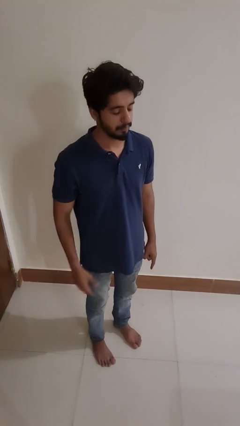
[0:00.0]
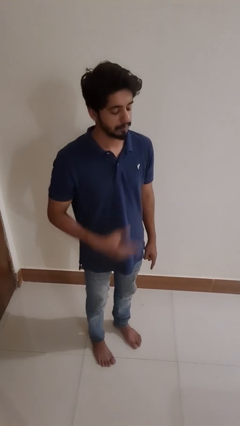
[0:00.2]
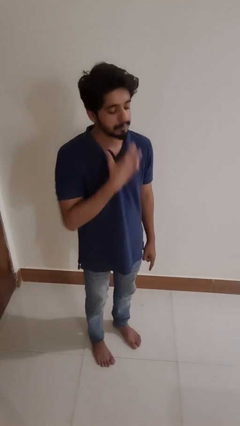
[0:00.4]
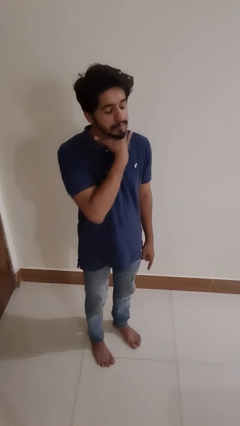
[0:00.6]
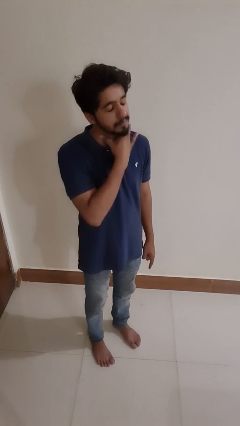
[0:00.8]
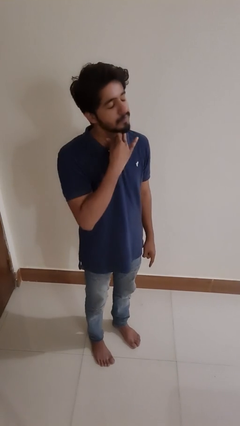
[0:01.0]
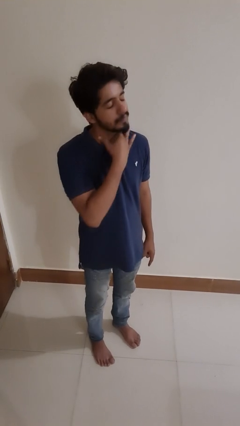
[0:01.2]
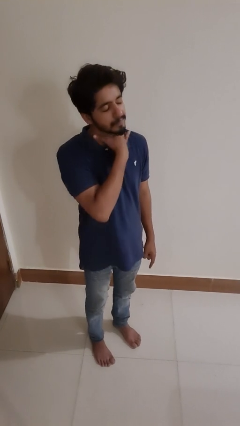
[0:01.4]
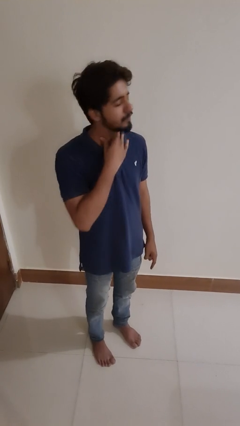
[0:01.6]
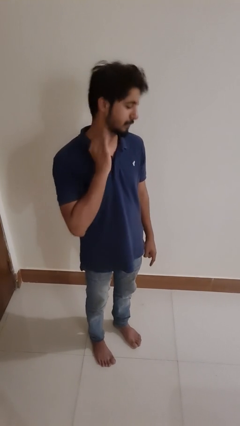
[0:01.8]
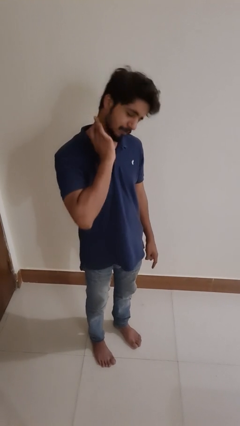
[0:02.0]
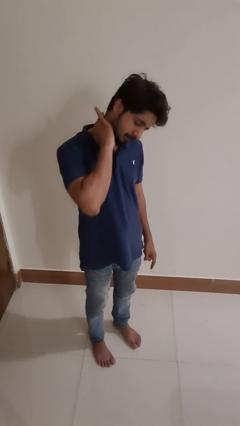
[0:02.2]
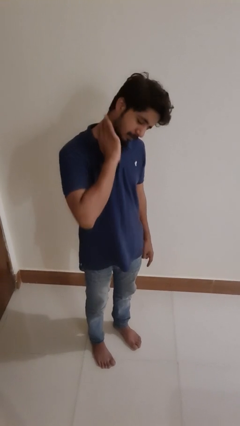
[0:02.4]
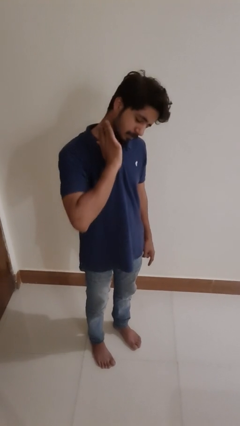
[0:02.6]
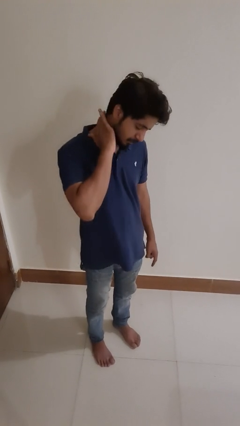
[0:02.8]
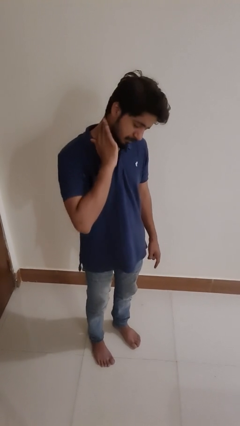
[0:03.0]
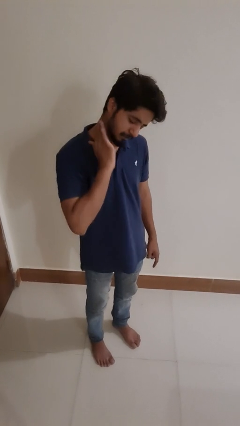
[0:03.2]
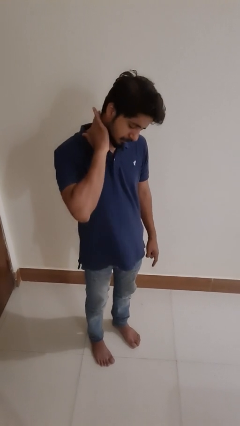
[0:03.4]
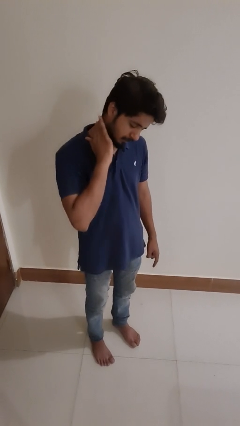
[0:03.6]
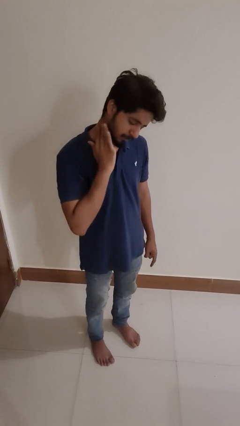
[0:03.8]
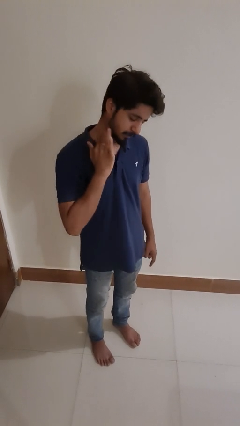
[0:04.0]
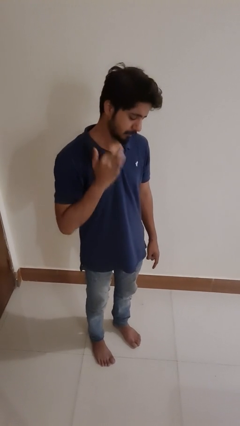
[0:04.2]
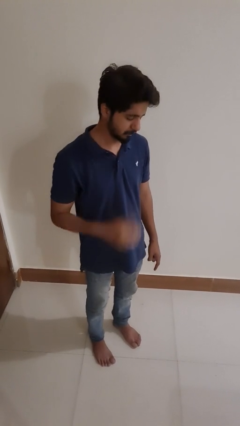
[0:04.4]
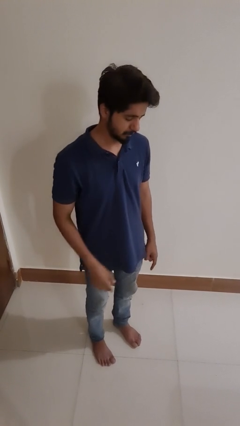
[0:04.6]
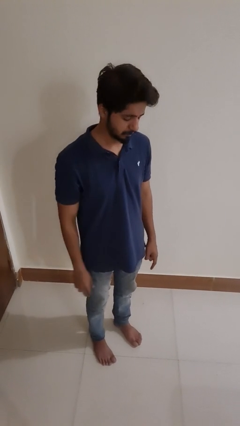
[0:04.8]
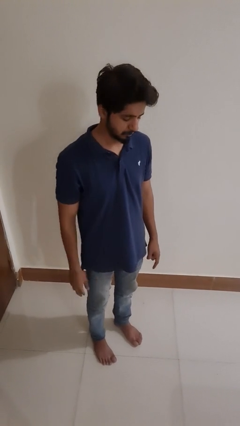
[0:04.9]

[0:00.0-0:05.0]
person rubs neck

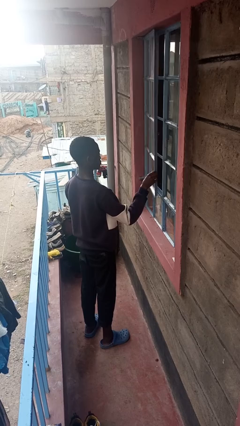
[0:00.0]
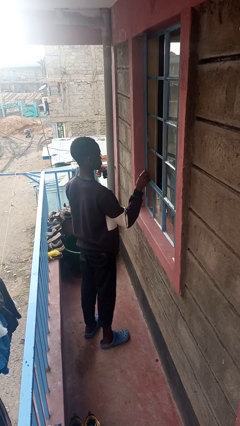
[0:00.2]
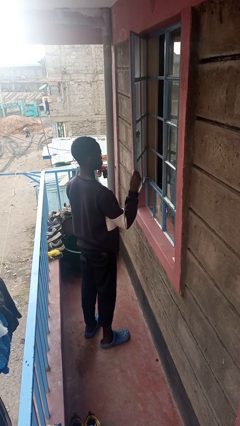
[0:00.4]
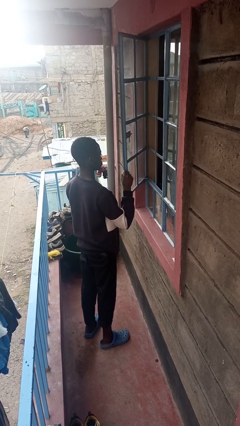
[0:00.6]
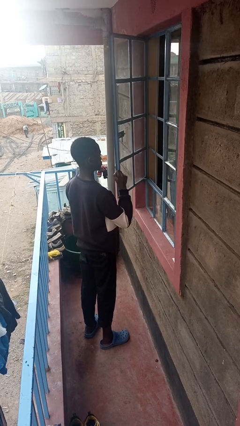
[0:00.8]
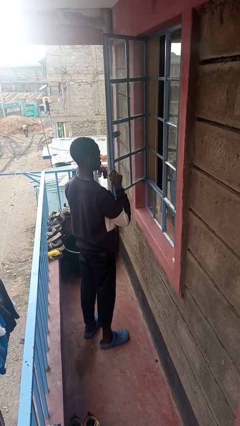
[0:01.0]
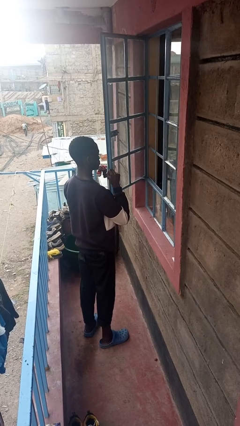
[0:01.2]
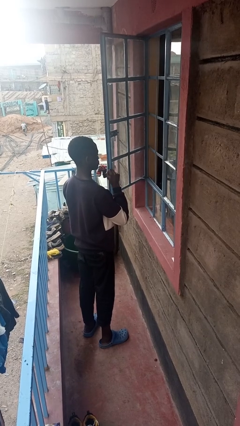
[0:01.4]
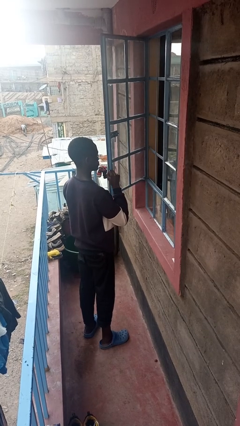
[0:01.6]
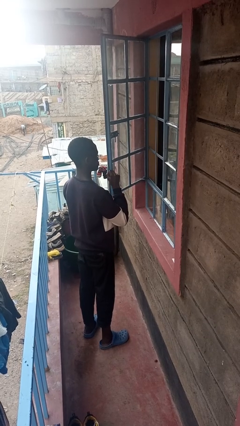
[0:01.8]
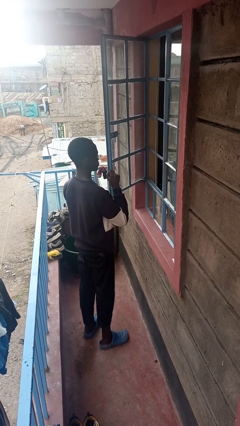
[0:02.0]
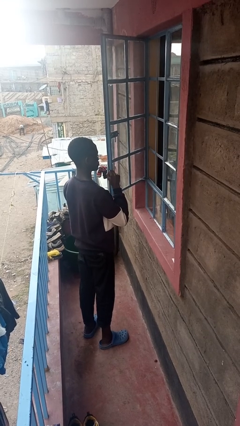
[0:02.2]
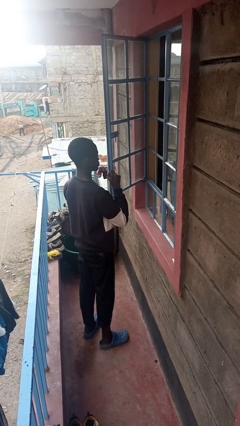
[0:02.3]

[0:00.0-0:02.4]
person opens home window

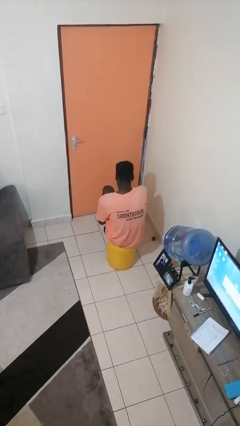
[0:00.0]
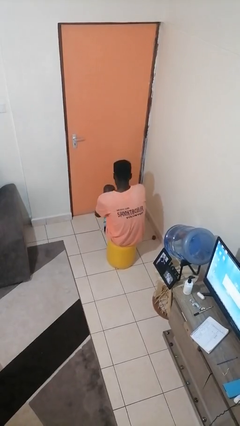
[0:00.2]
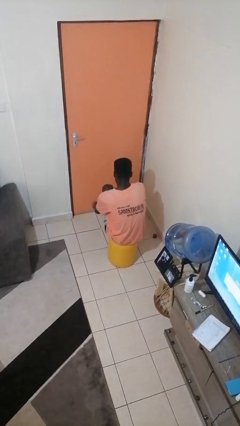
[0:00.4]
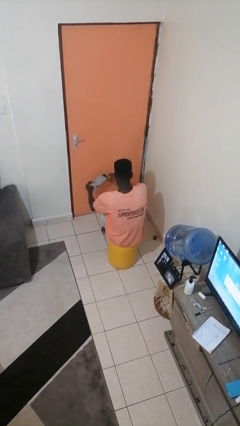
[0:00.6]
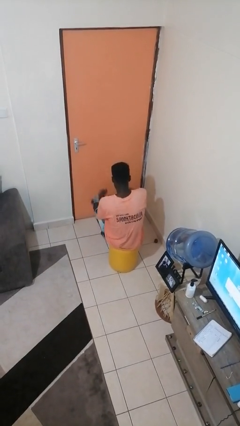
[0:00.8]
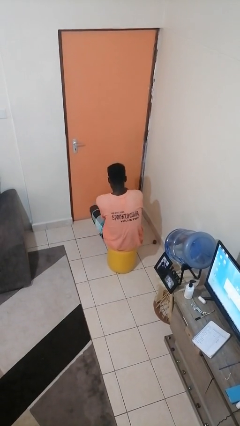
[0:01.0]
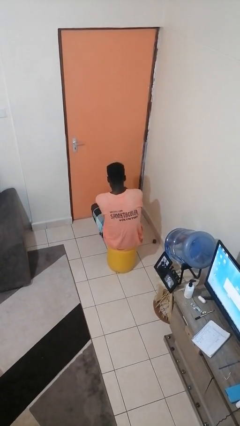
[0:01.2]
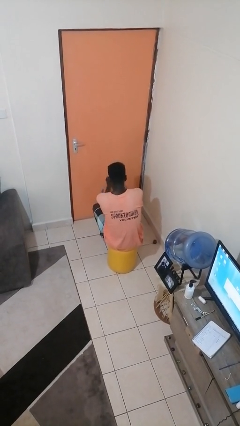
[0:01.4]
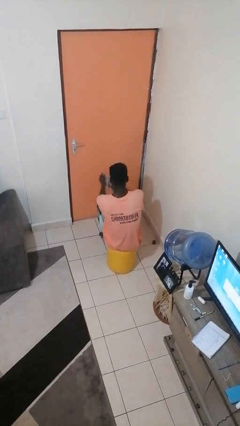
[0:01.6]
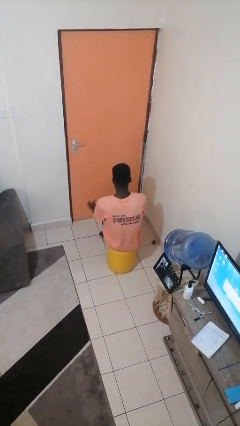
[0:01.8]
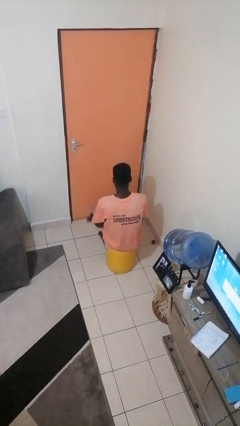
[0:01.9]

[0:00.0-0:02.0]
person takes off socks

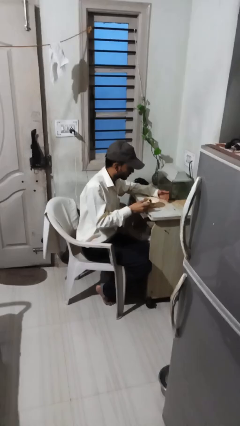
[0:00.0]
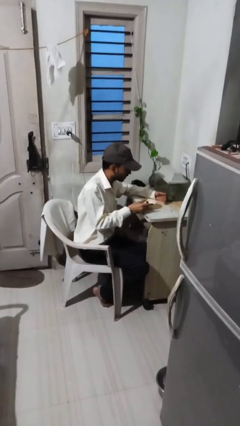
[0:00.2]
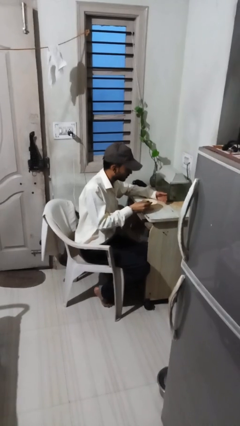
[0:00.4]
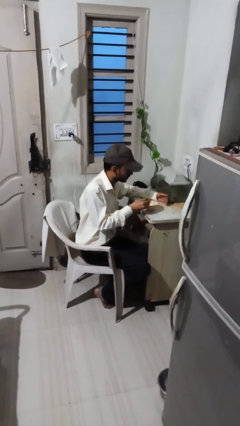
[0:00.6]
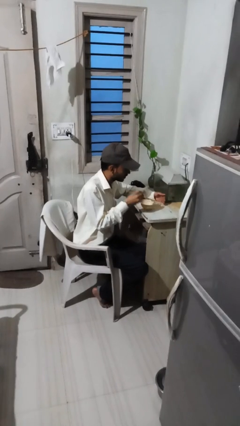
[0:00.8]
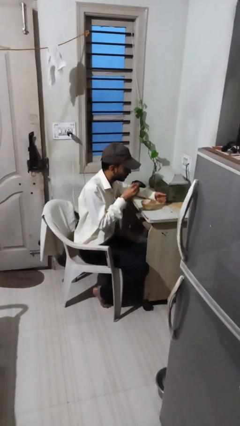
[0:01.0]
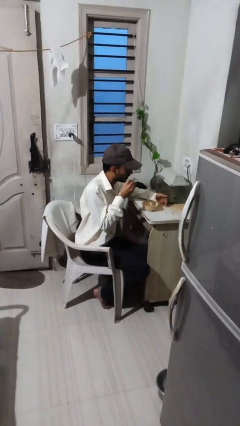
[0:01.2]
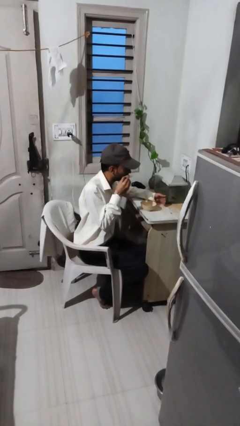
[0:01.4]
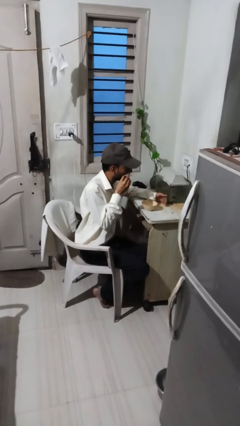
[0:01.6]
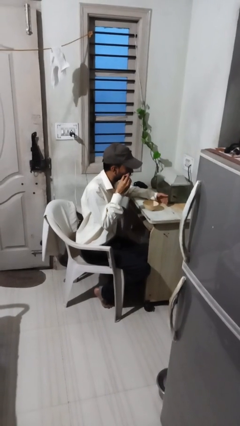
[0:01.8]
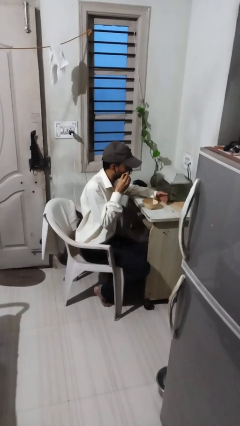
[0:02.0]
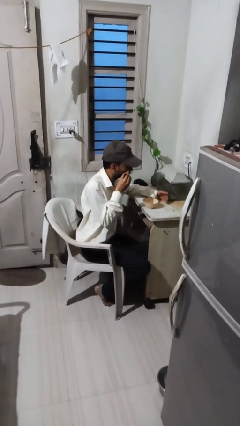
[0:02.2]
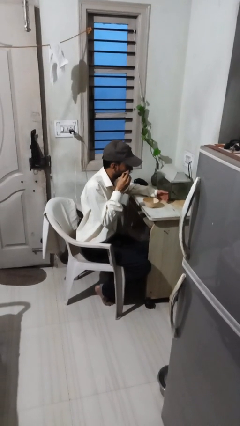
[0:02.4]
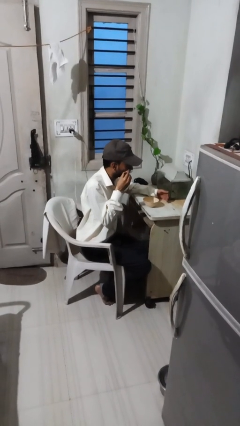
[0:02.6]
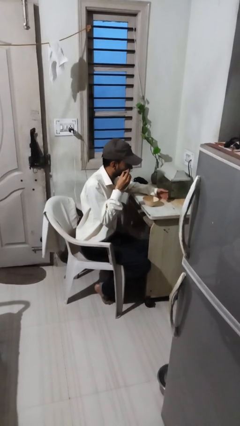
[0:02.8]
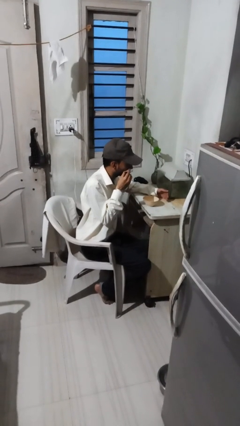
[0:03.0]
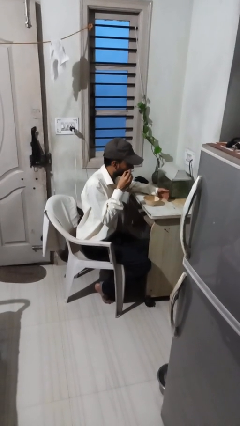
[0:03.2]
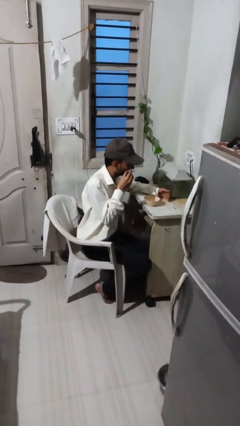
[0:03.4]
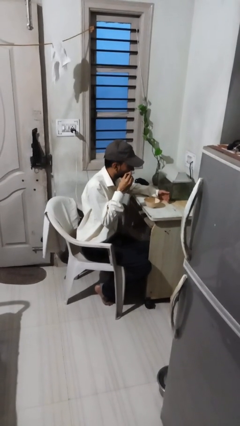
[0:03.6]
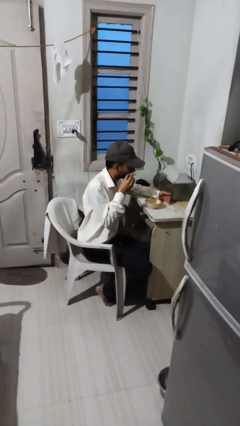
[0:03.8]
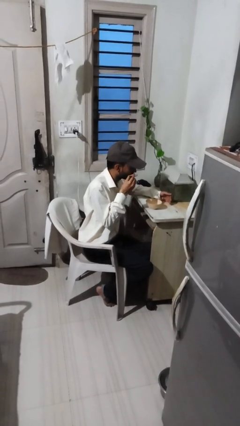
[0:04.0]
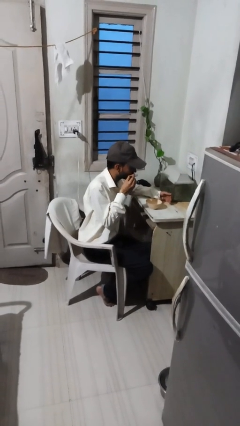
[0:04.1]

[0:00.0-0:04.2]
person eats with utensil

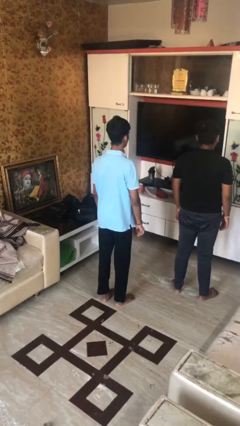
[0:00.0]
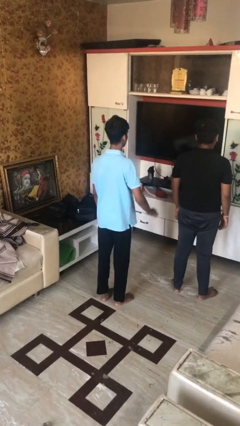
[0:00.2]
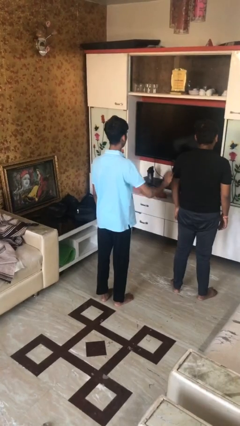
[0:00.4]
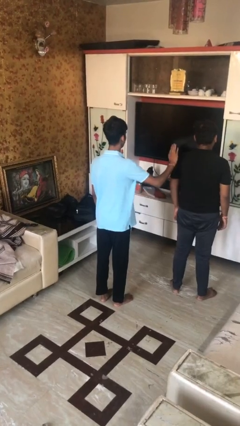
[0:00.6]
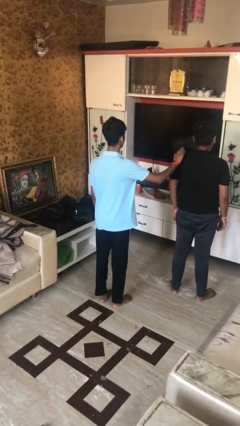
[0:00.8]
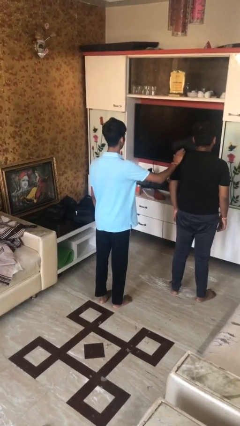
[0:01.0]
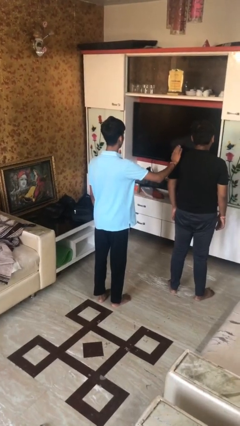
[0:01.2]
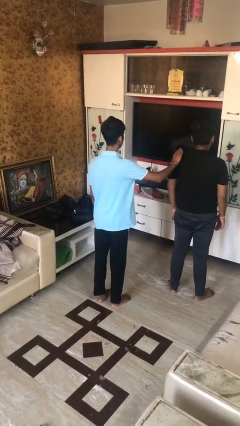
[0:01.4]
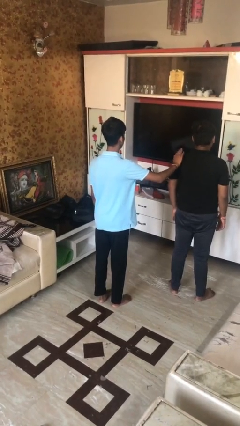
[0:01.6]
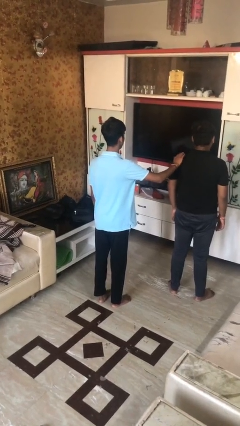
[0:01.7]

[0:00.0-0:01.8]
person pounds shoulders of person

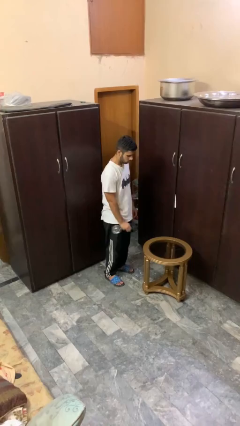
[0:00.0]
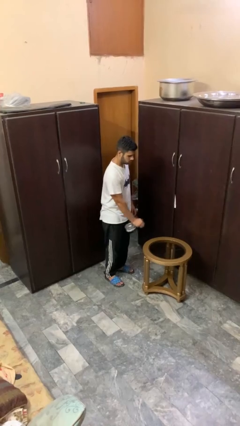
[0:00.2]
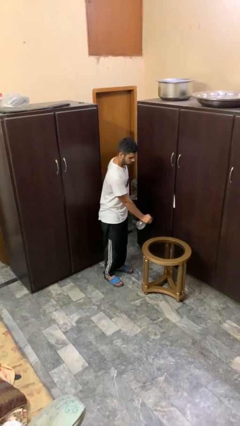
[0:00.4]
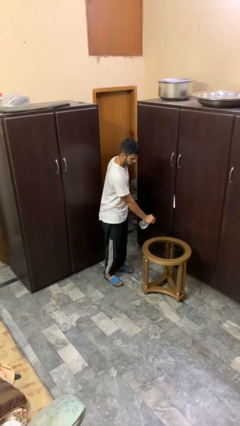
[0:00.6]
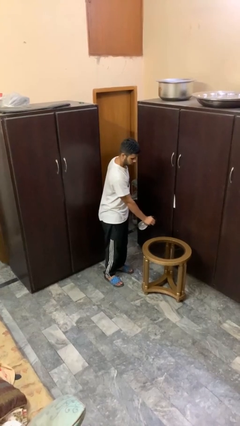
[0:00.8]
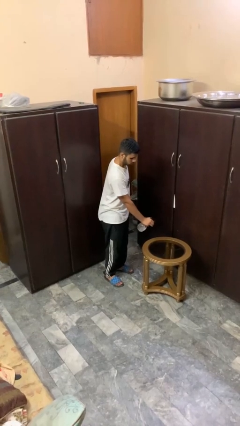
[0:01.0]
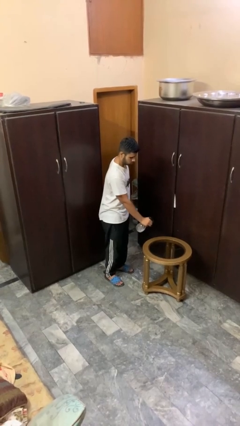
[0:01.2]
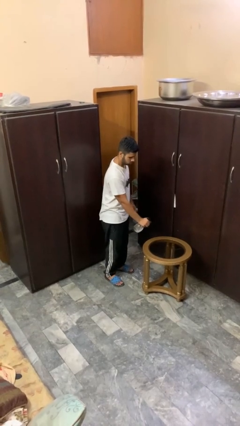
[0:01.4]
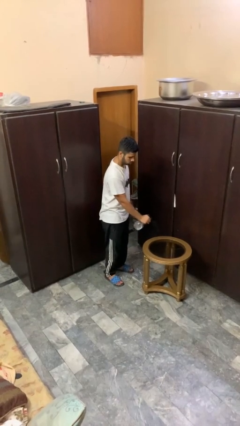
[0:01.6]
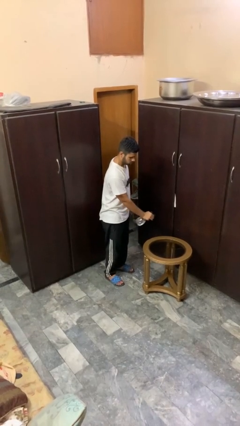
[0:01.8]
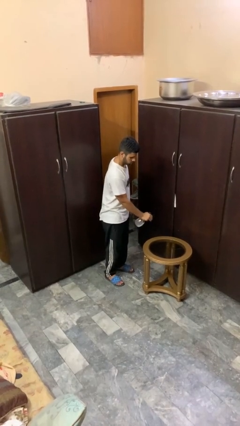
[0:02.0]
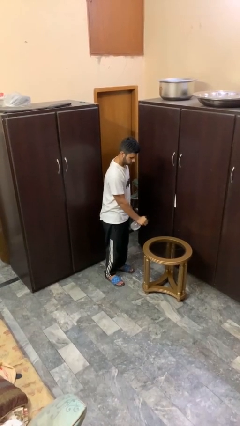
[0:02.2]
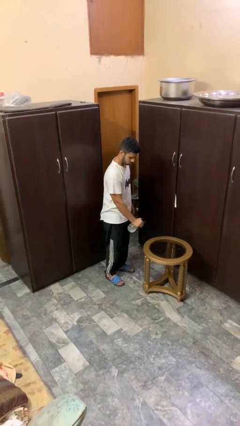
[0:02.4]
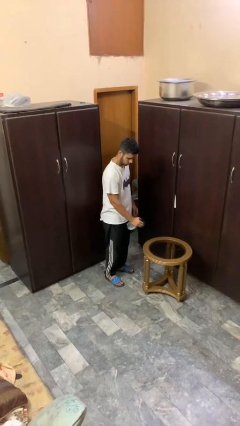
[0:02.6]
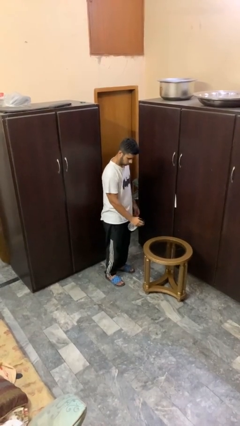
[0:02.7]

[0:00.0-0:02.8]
person sprays from bottle
